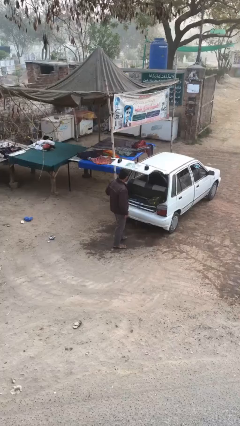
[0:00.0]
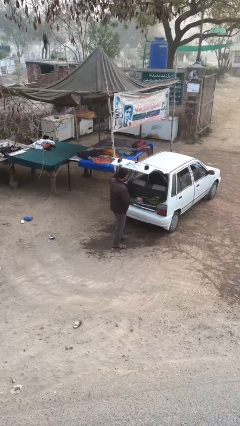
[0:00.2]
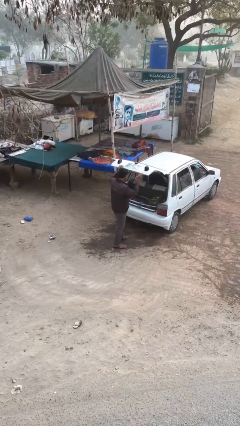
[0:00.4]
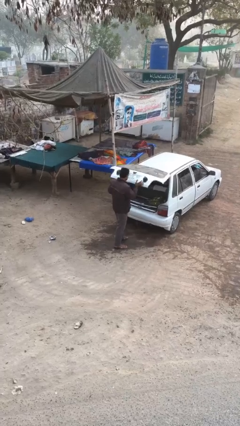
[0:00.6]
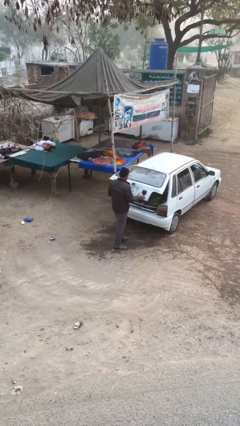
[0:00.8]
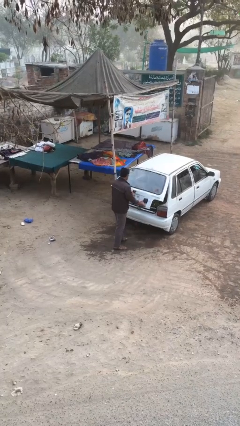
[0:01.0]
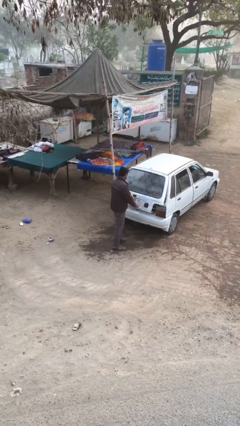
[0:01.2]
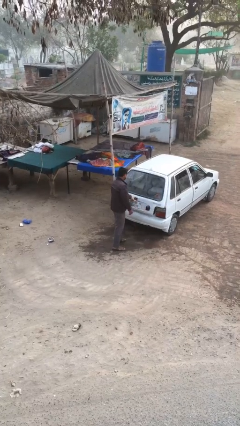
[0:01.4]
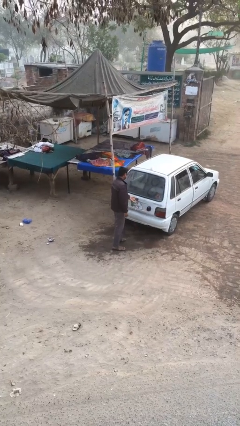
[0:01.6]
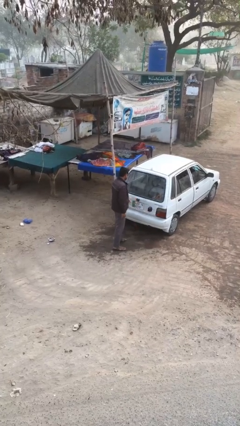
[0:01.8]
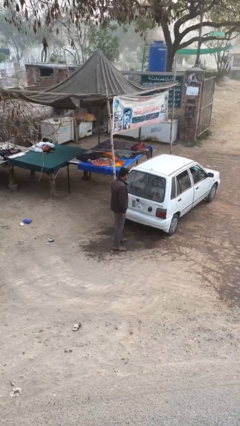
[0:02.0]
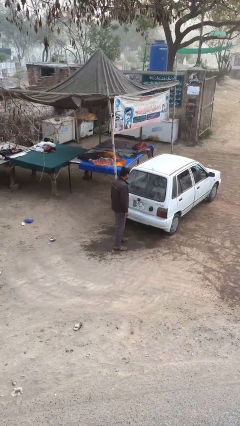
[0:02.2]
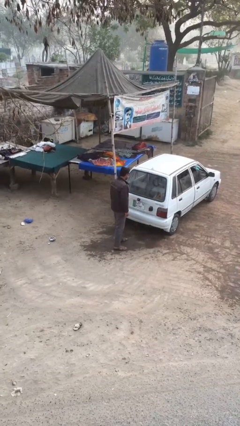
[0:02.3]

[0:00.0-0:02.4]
person closes car trunk

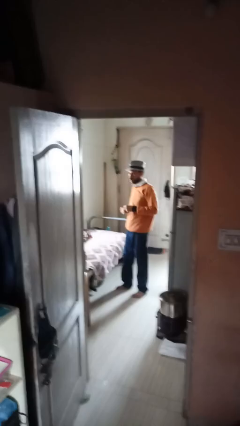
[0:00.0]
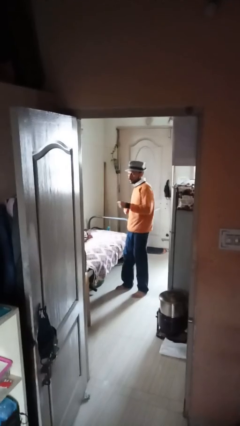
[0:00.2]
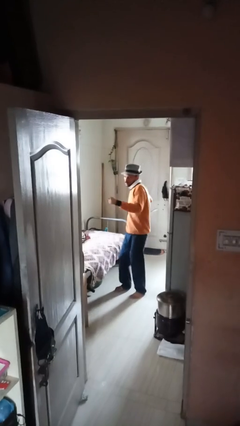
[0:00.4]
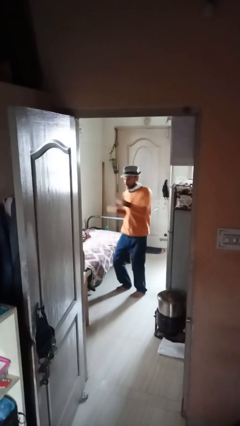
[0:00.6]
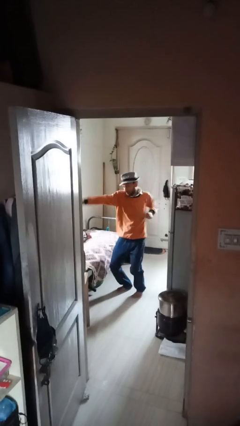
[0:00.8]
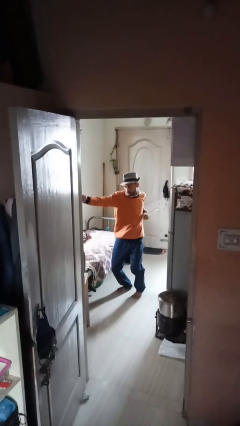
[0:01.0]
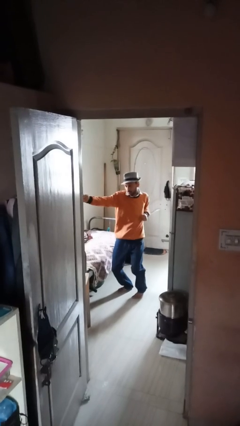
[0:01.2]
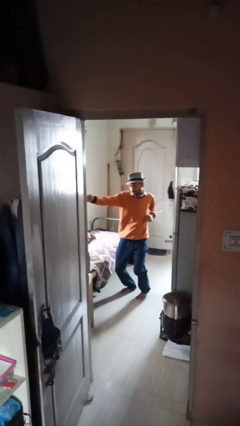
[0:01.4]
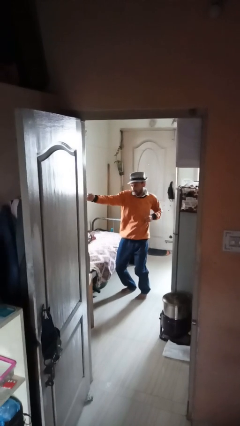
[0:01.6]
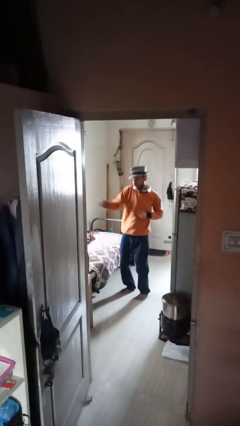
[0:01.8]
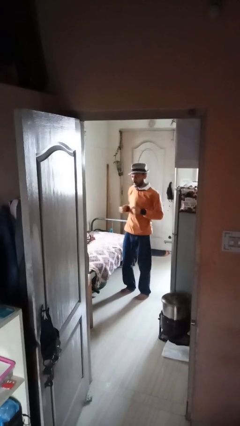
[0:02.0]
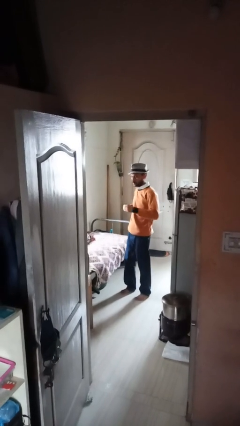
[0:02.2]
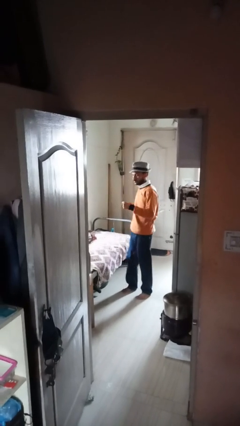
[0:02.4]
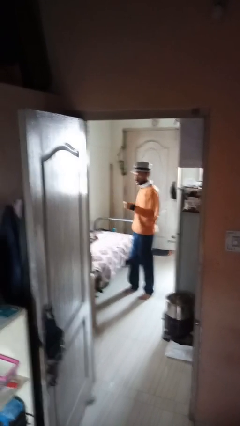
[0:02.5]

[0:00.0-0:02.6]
person punches

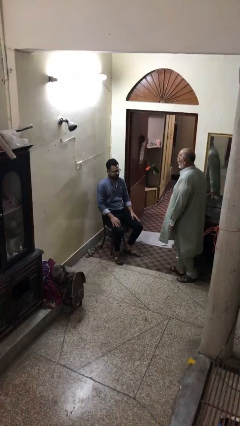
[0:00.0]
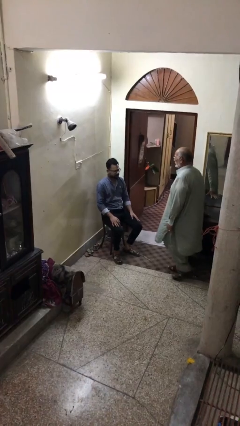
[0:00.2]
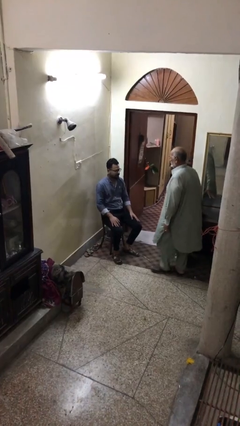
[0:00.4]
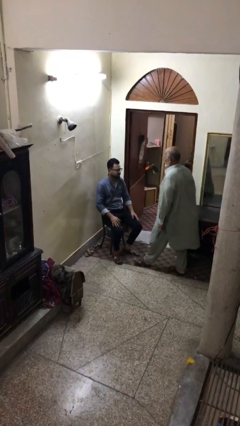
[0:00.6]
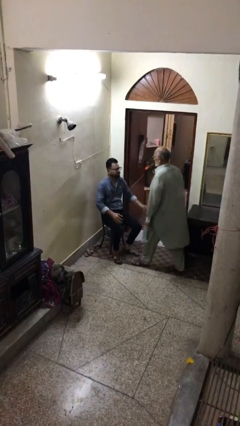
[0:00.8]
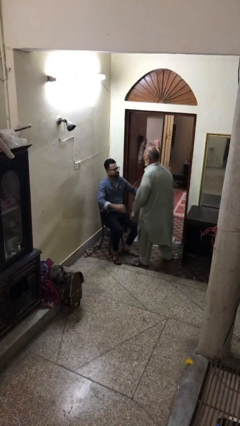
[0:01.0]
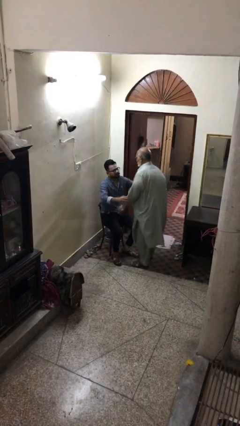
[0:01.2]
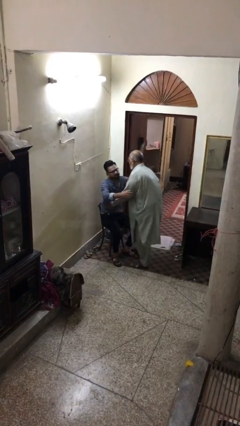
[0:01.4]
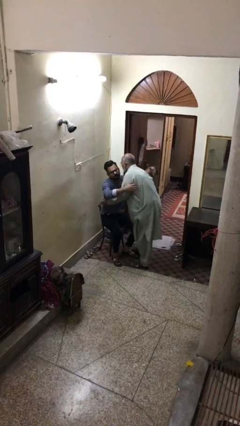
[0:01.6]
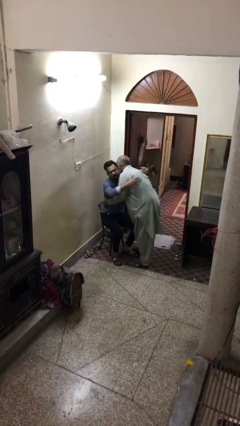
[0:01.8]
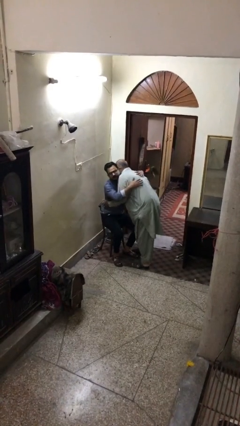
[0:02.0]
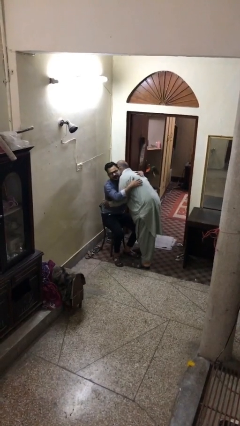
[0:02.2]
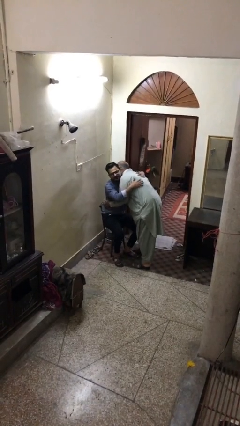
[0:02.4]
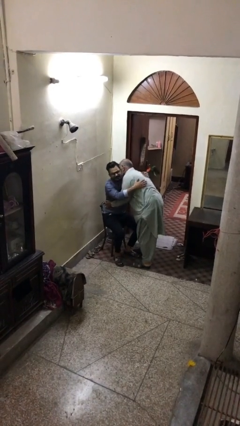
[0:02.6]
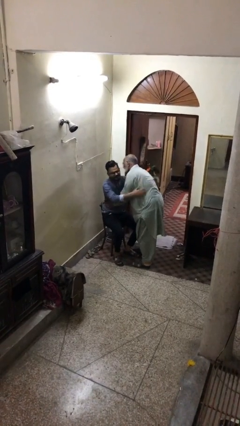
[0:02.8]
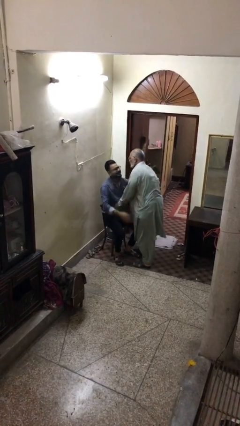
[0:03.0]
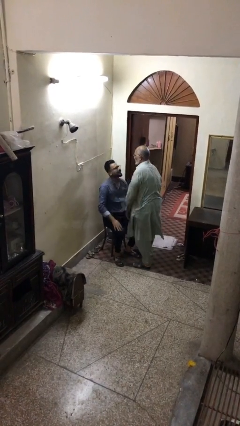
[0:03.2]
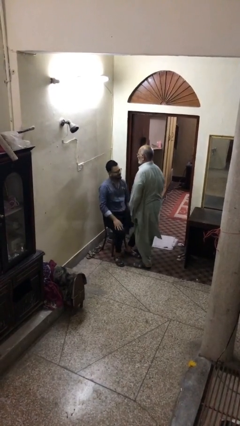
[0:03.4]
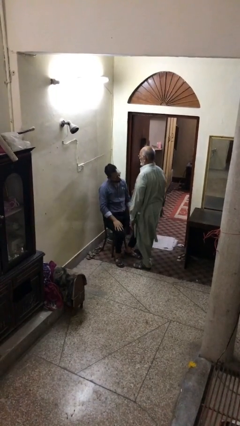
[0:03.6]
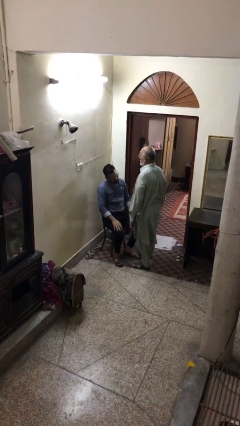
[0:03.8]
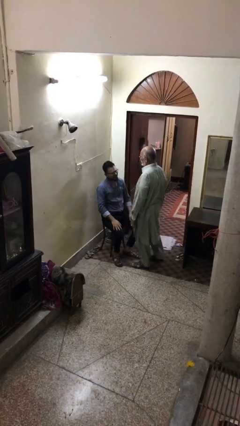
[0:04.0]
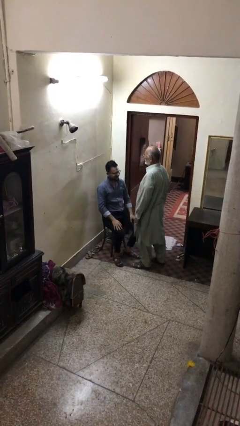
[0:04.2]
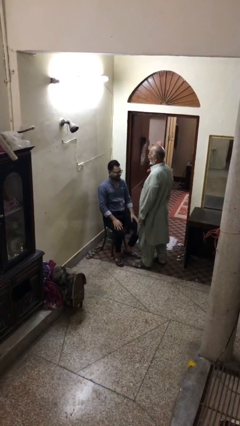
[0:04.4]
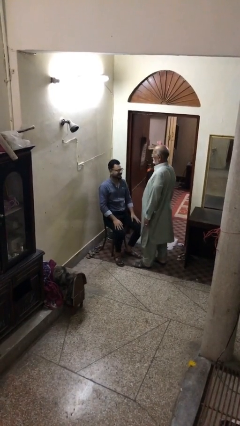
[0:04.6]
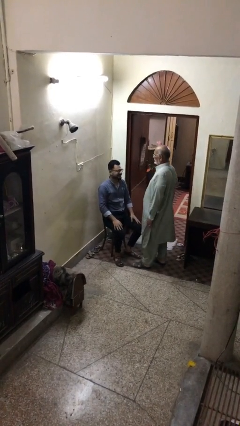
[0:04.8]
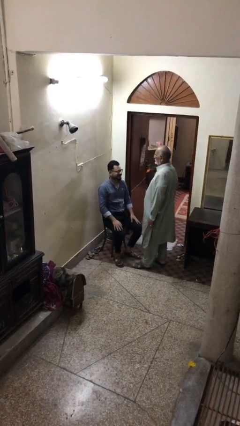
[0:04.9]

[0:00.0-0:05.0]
person embraces person

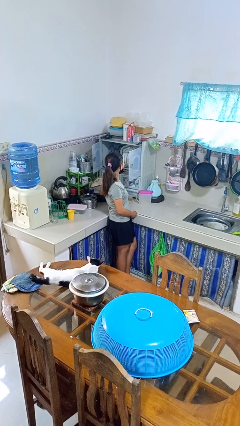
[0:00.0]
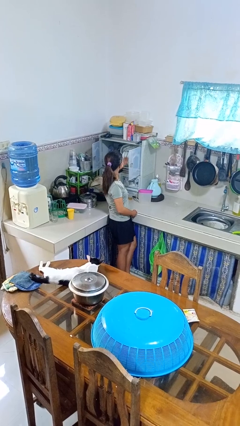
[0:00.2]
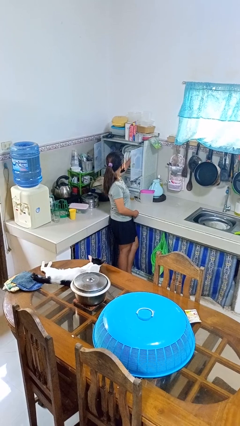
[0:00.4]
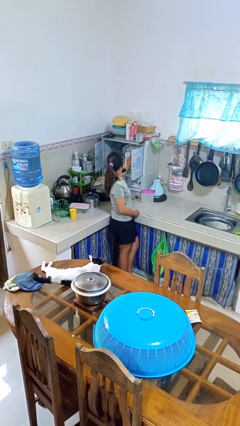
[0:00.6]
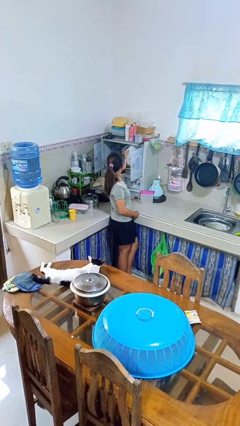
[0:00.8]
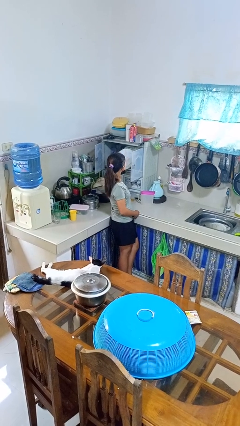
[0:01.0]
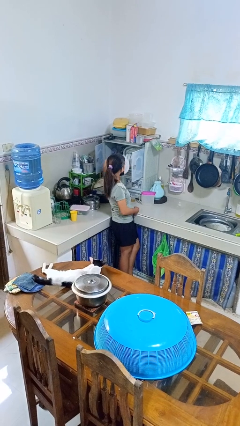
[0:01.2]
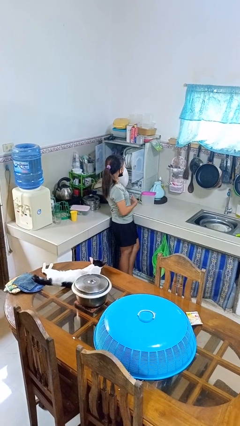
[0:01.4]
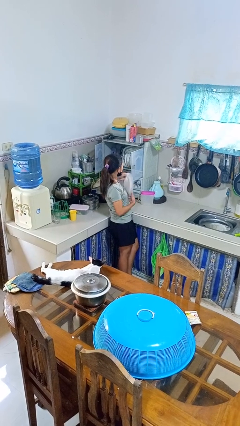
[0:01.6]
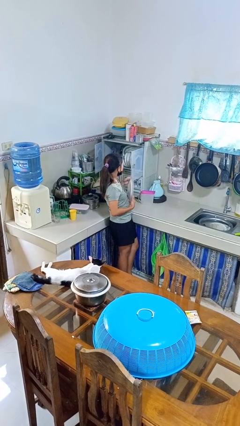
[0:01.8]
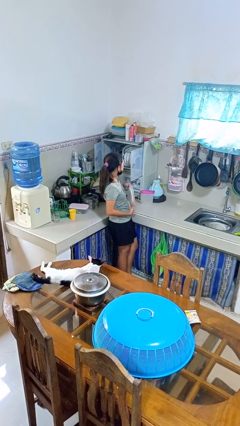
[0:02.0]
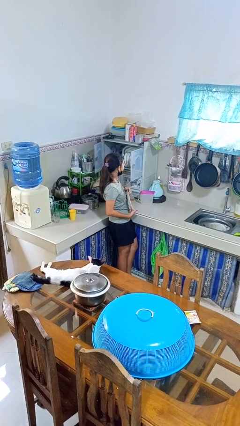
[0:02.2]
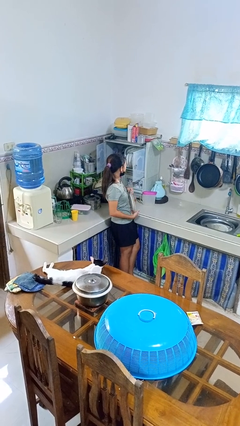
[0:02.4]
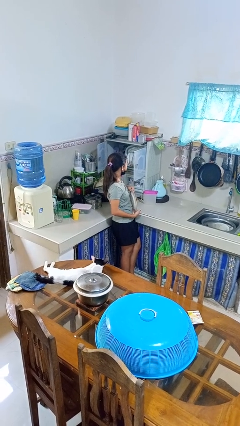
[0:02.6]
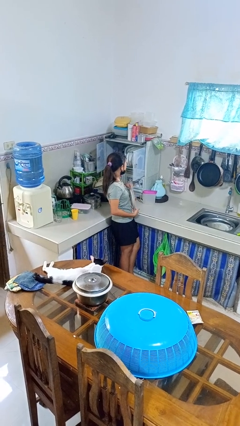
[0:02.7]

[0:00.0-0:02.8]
person takes object from kitchen drawer

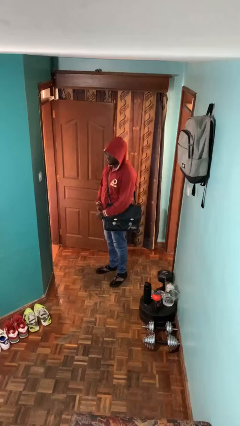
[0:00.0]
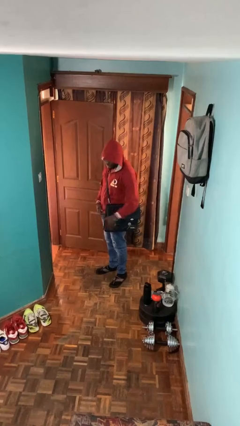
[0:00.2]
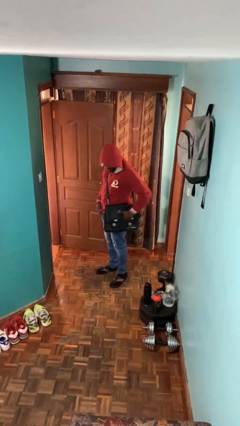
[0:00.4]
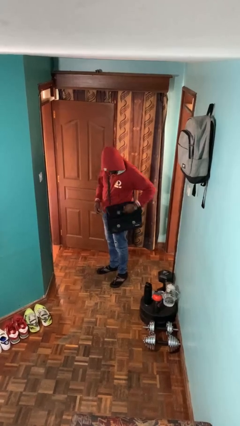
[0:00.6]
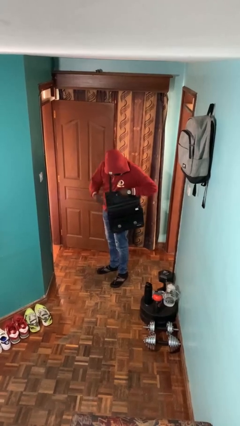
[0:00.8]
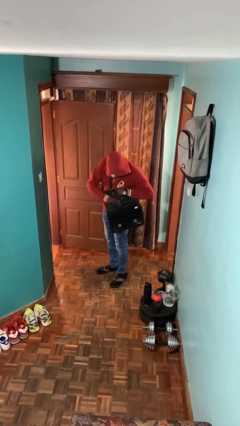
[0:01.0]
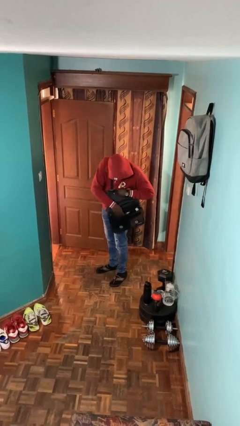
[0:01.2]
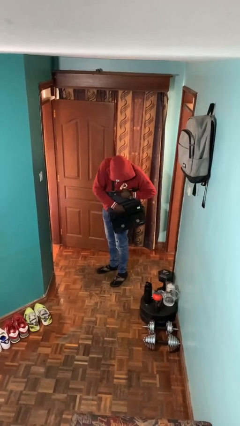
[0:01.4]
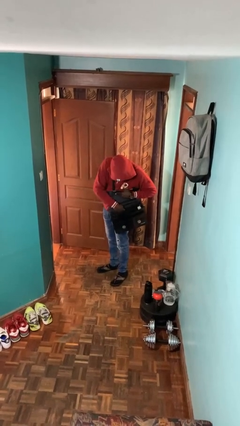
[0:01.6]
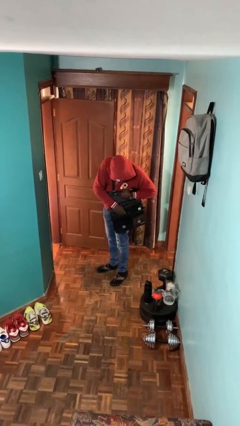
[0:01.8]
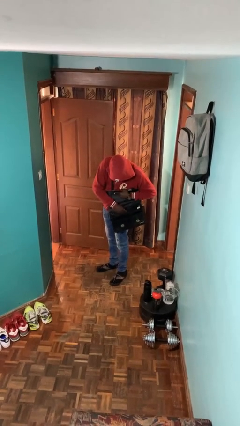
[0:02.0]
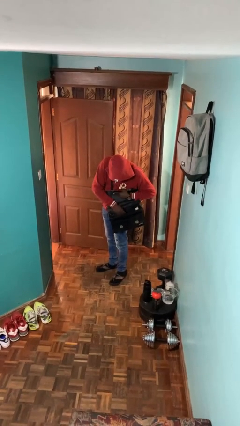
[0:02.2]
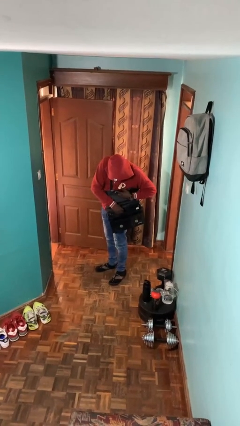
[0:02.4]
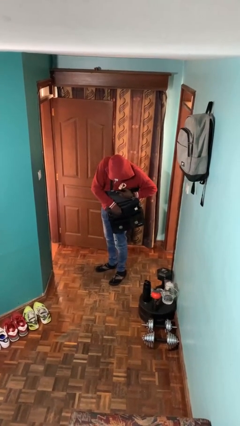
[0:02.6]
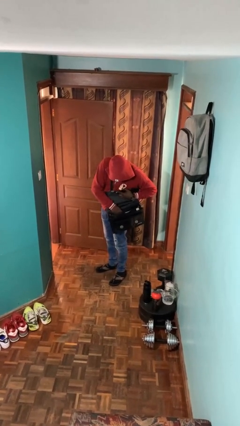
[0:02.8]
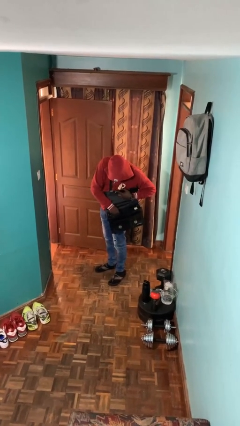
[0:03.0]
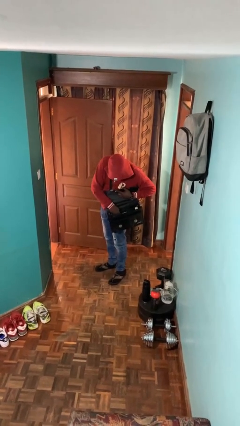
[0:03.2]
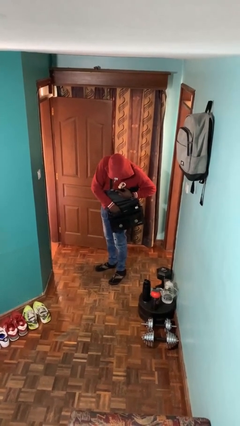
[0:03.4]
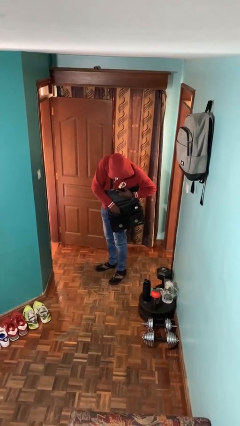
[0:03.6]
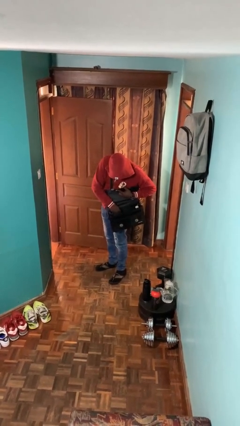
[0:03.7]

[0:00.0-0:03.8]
person searches in purse

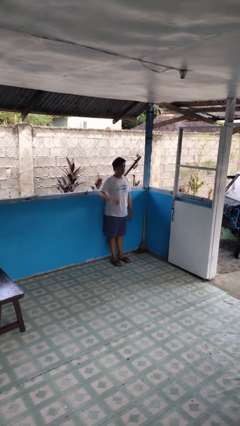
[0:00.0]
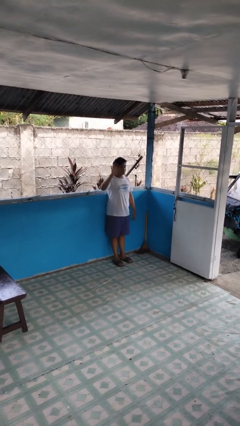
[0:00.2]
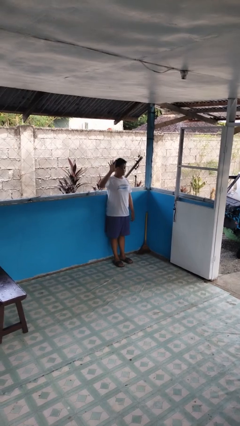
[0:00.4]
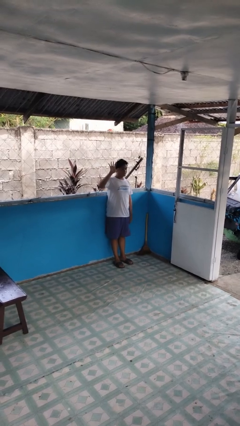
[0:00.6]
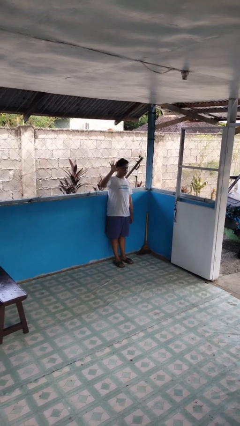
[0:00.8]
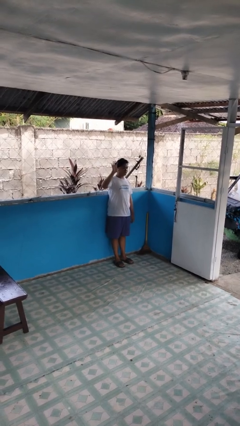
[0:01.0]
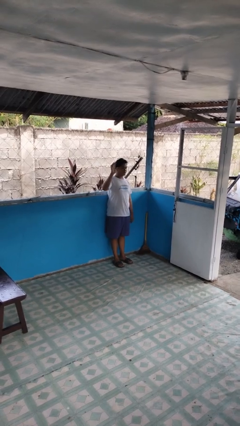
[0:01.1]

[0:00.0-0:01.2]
person gestures number five
